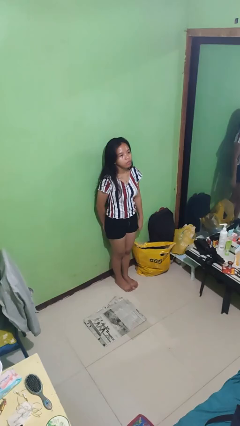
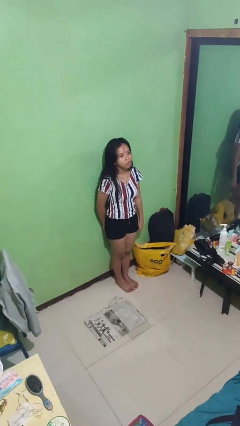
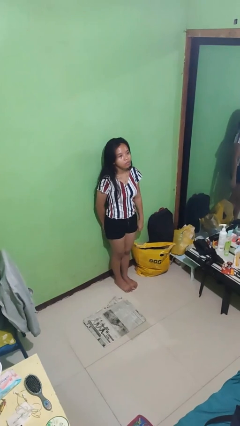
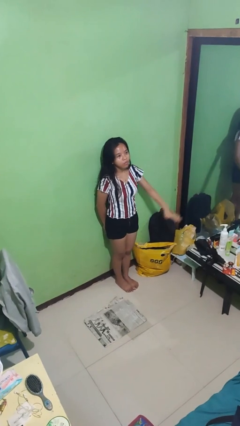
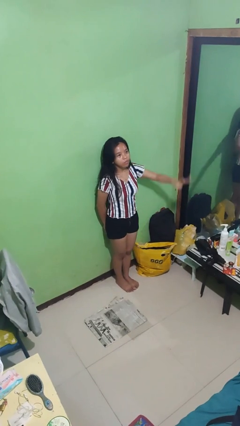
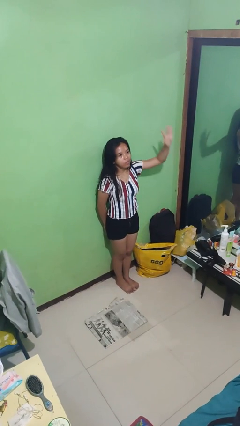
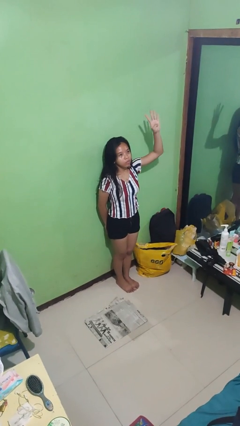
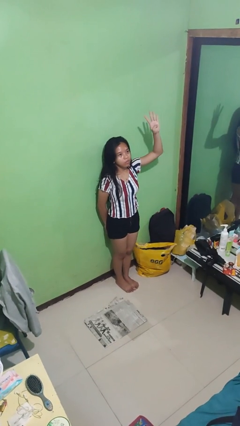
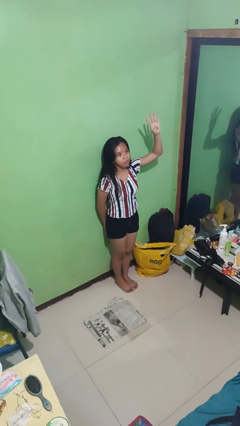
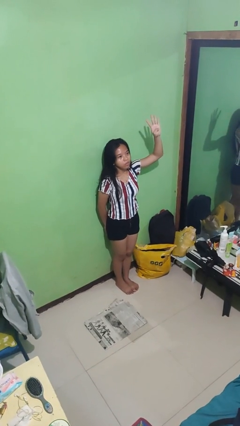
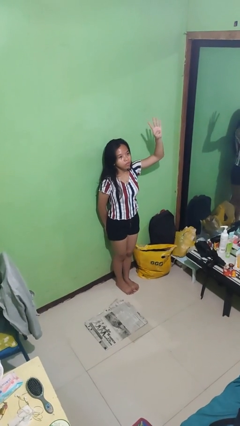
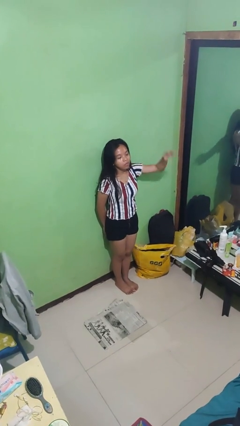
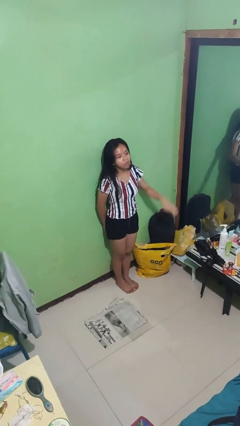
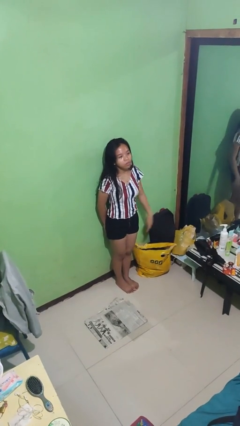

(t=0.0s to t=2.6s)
person gestures number four

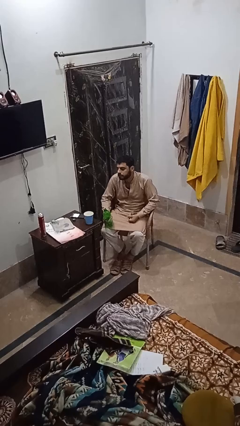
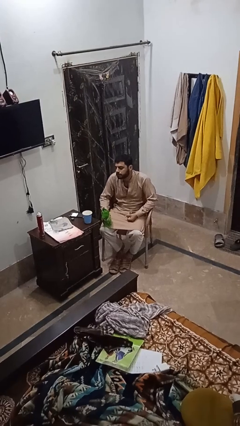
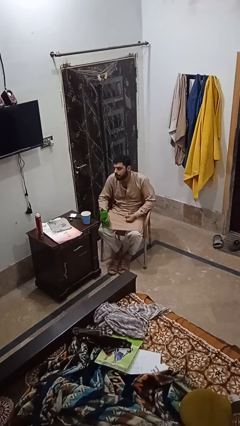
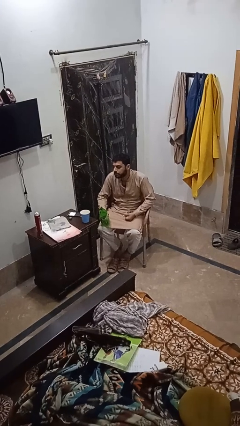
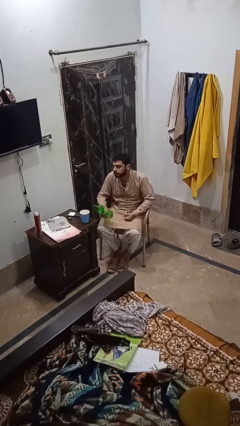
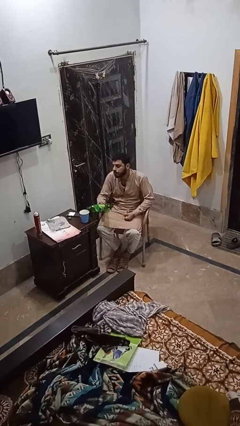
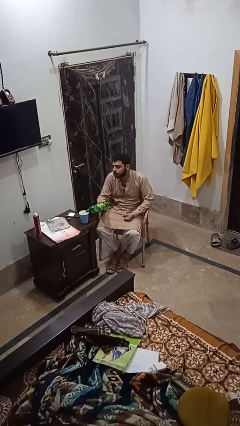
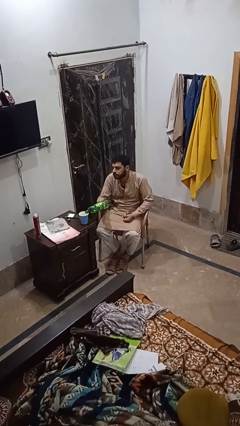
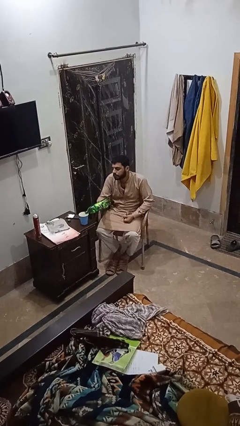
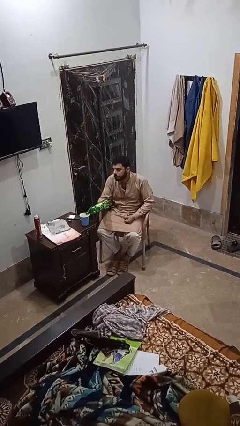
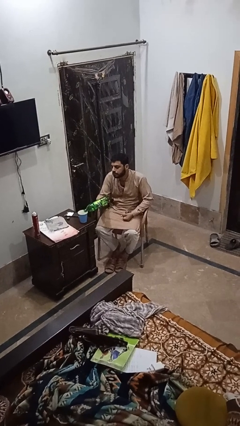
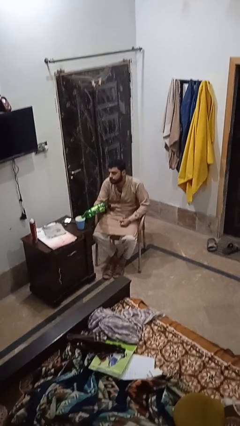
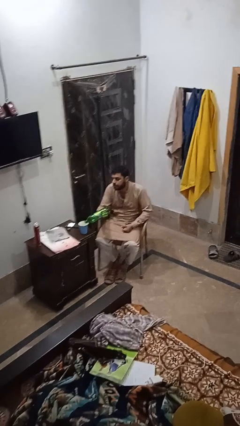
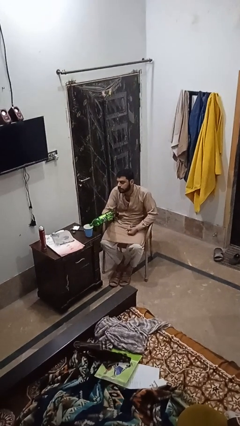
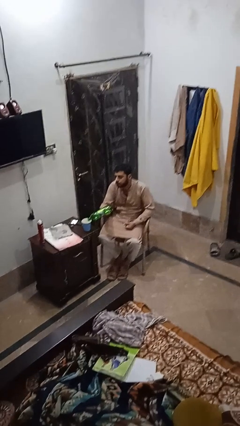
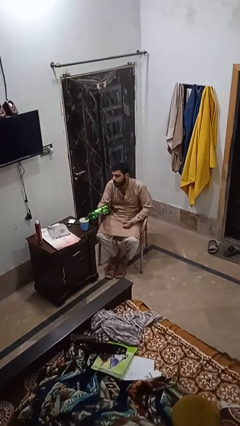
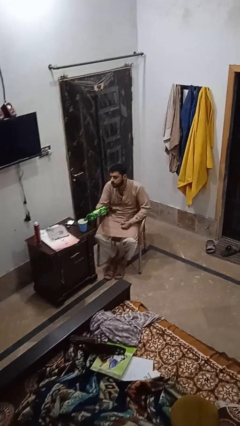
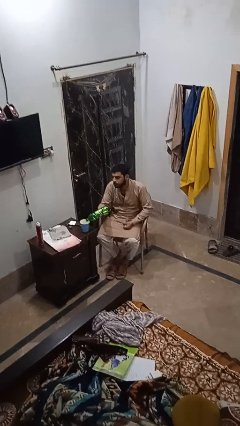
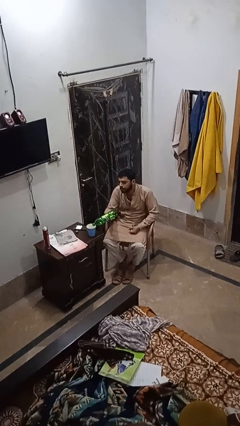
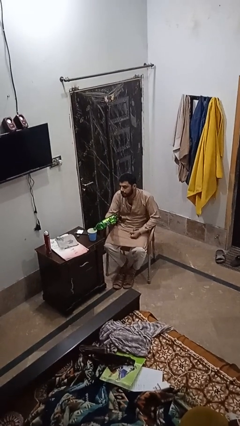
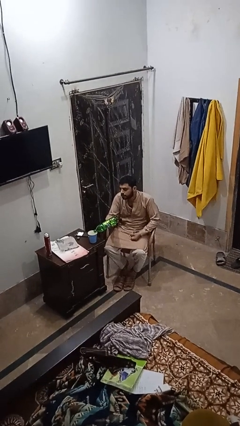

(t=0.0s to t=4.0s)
person pours liquid into cup

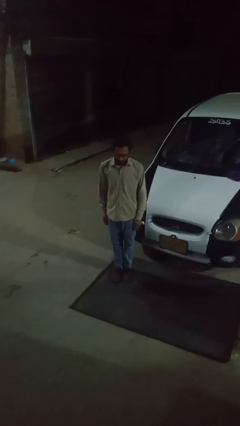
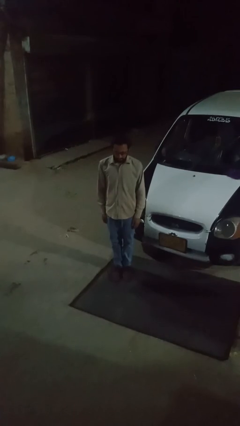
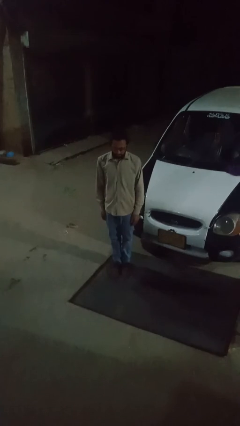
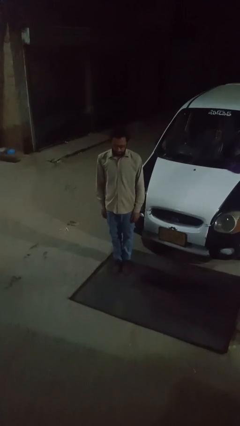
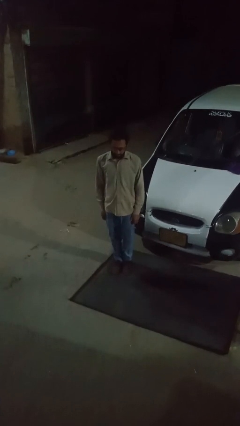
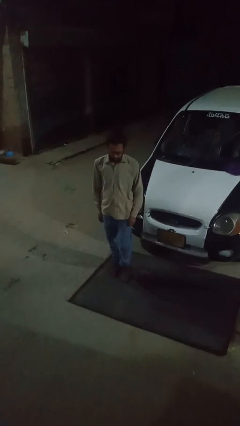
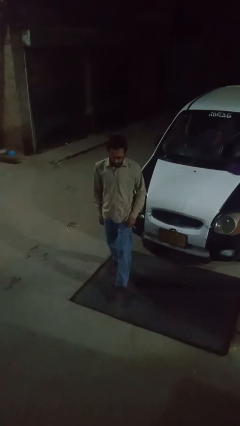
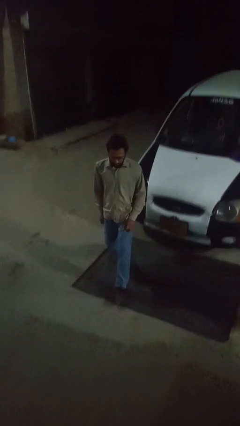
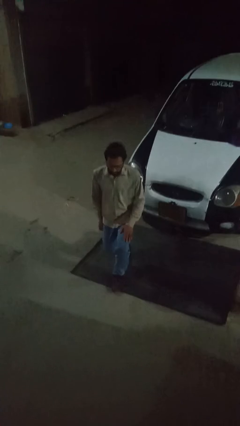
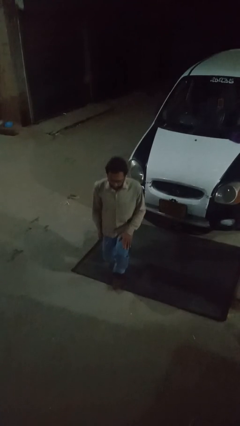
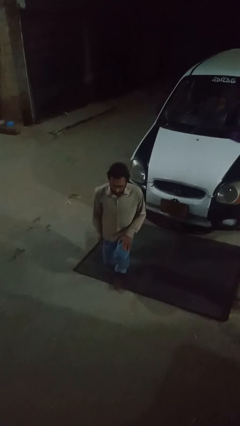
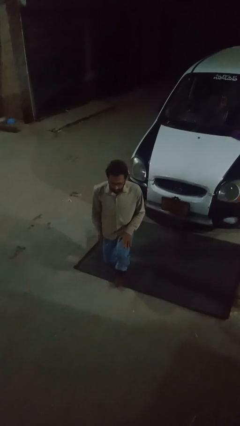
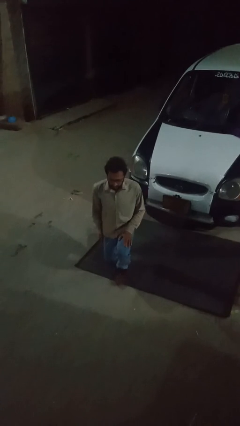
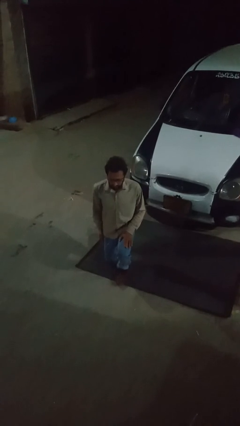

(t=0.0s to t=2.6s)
person squats

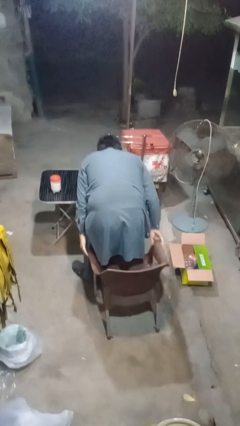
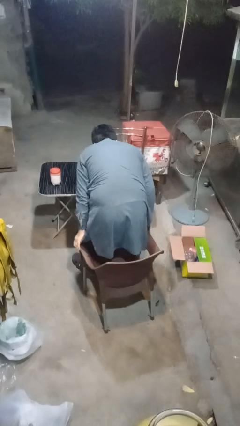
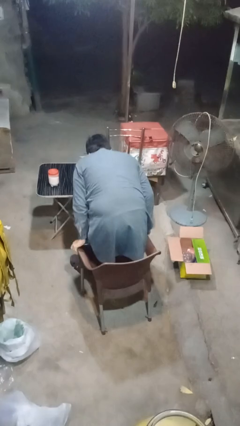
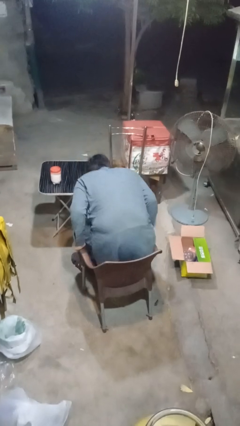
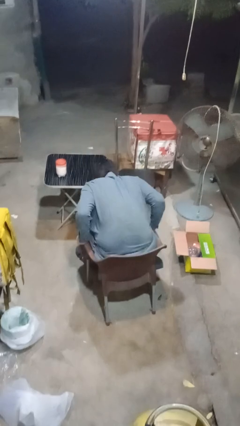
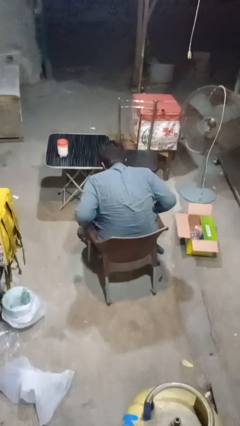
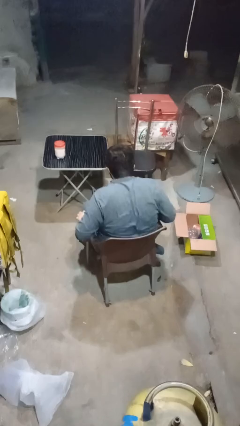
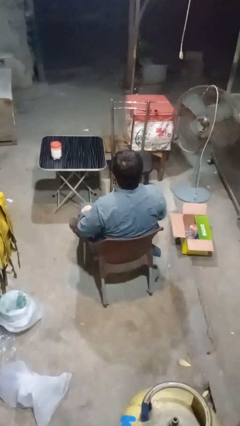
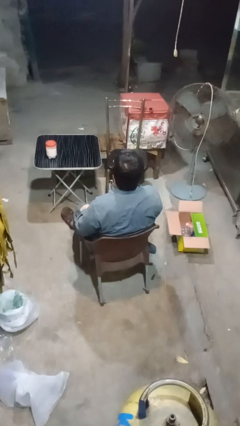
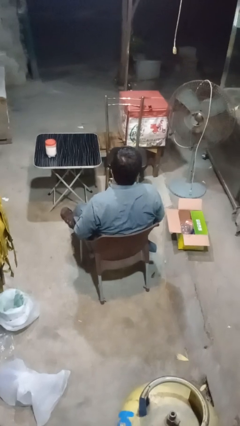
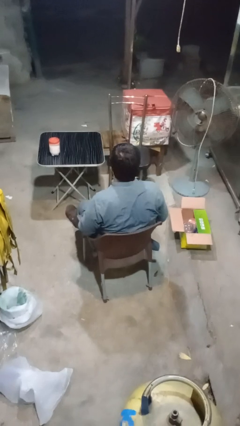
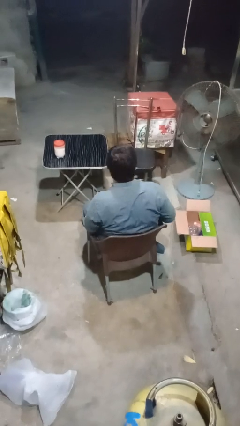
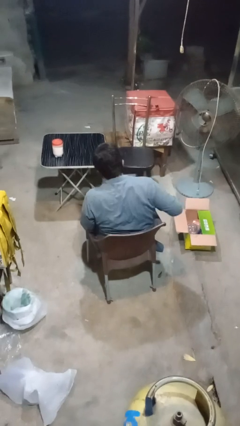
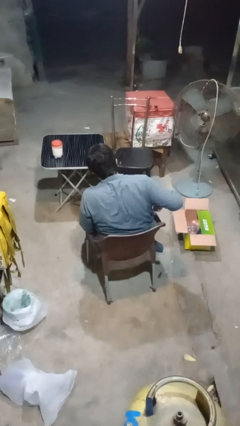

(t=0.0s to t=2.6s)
person sits down

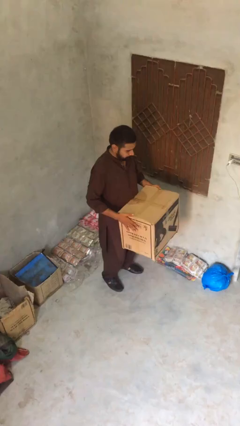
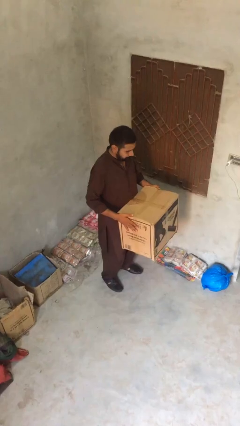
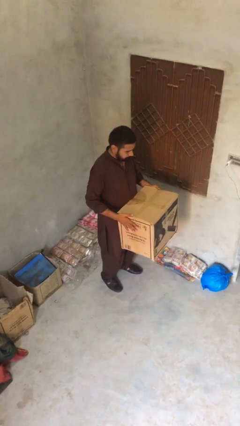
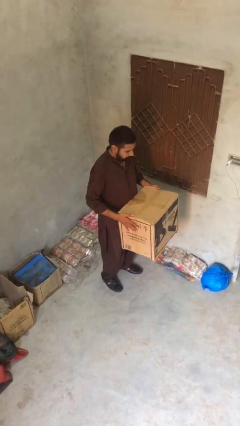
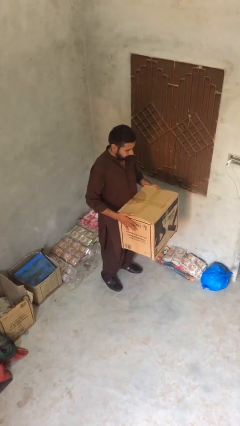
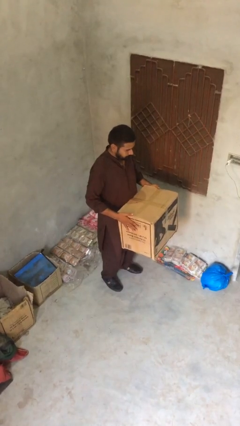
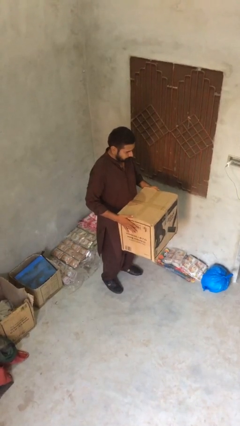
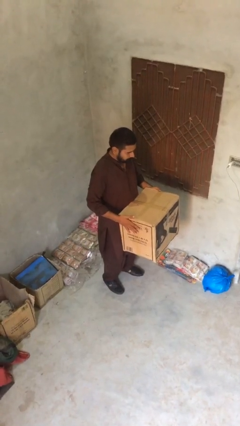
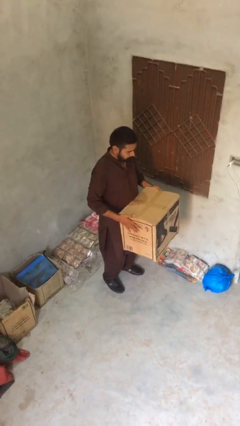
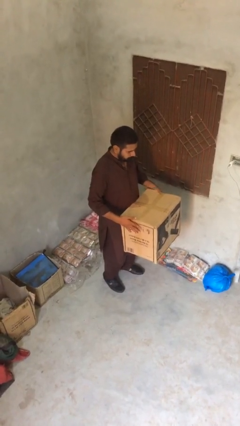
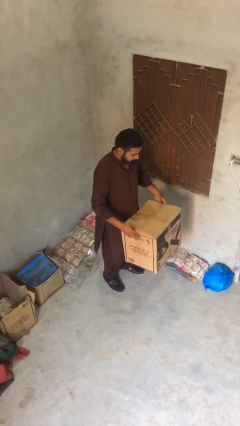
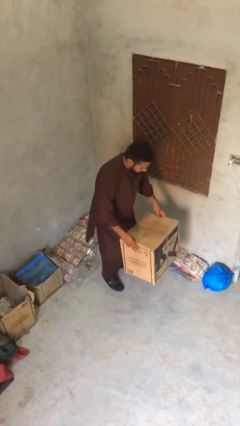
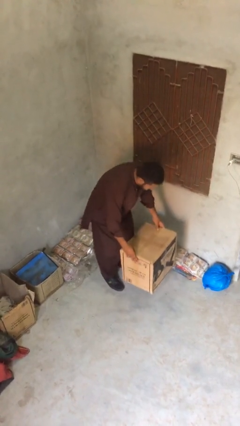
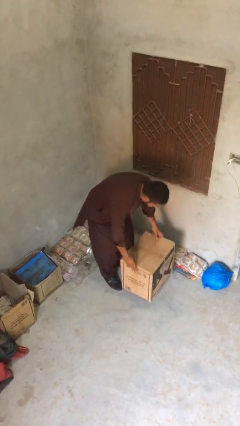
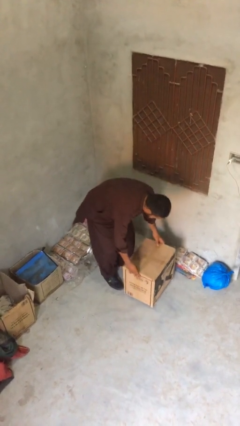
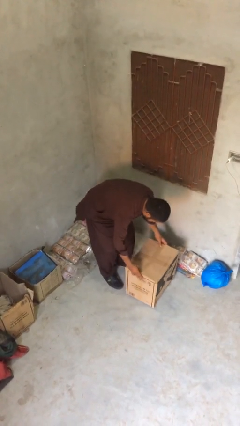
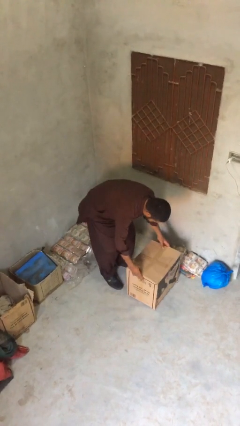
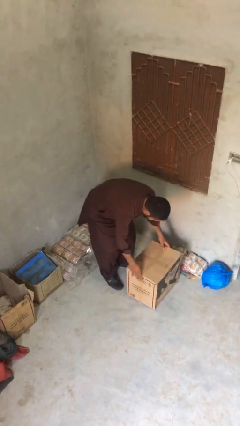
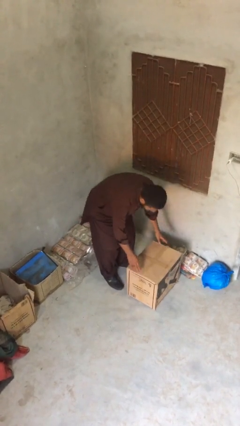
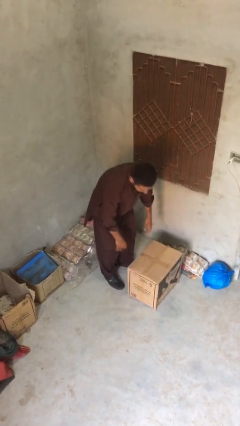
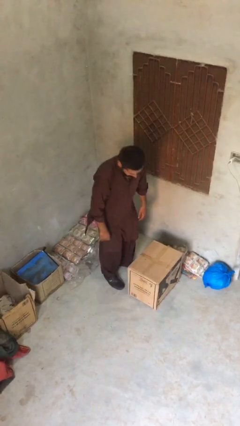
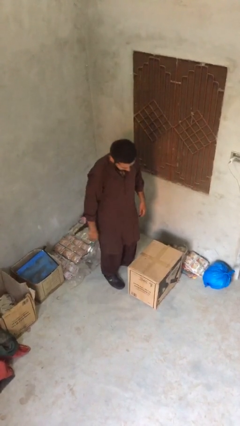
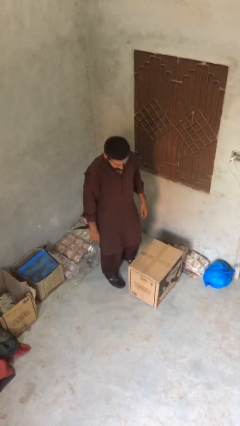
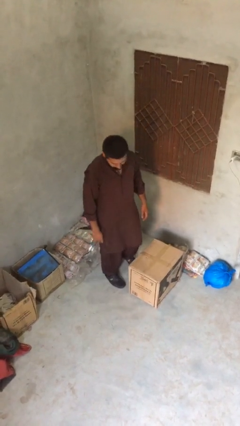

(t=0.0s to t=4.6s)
person puts down object on floor

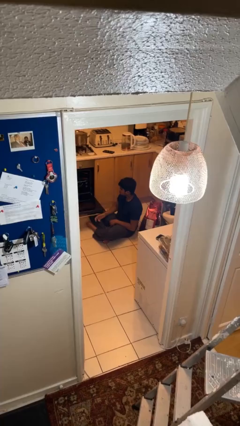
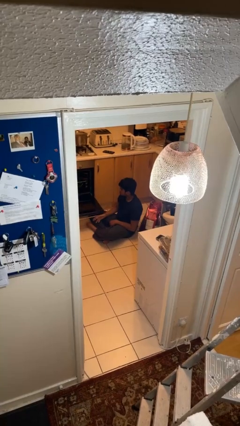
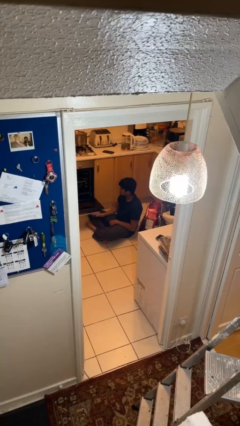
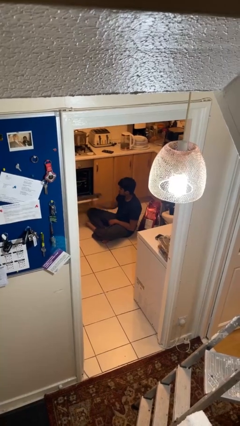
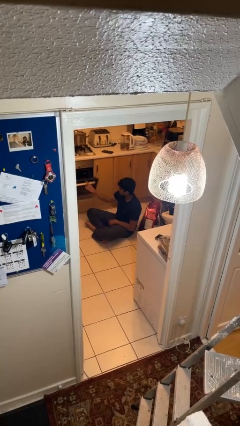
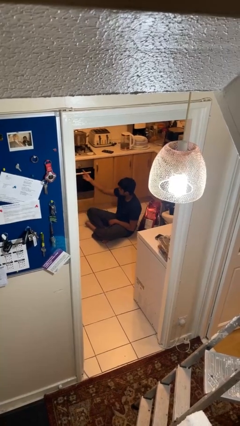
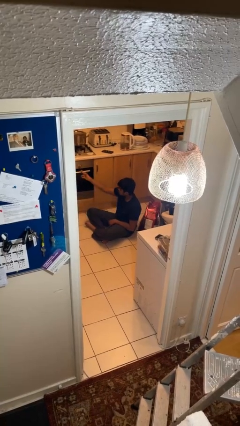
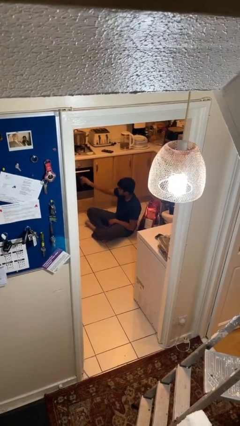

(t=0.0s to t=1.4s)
person closes oven door
